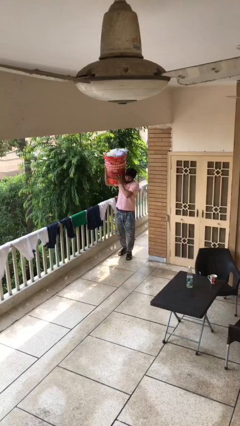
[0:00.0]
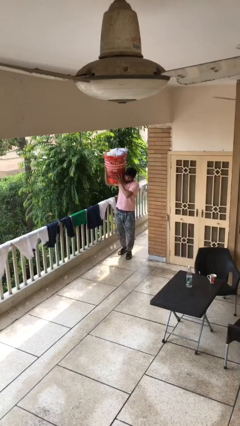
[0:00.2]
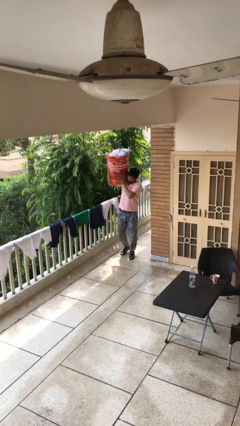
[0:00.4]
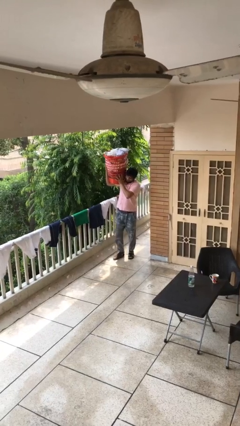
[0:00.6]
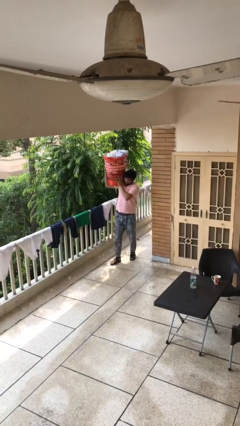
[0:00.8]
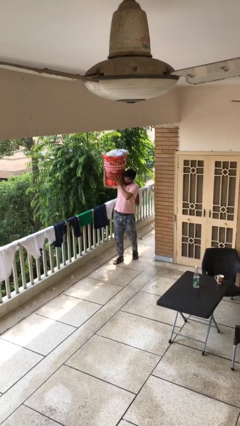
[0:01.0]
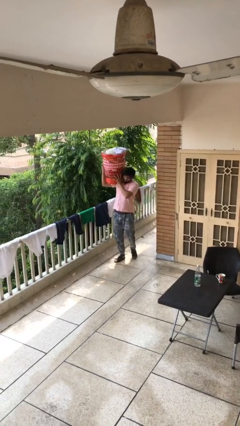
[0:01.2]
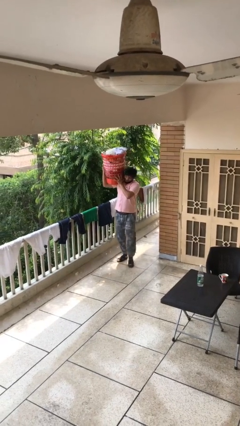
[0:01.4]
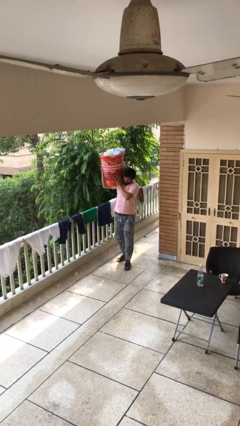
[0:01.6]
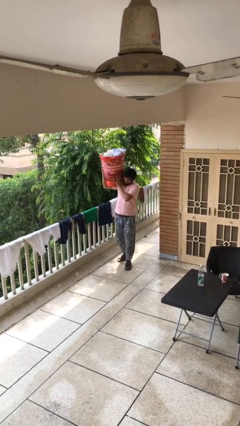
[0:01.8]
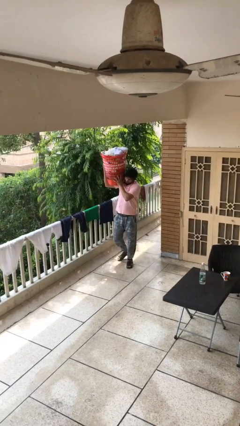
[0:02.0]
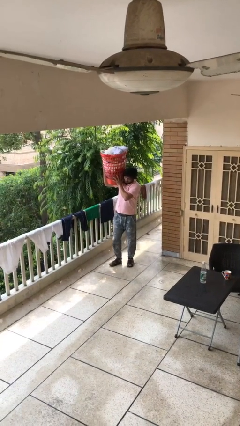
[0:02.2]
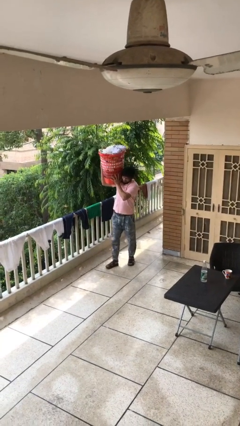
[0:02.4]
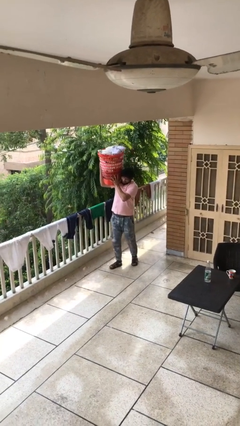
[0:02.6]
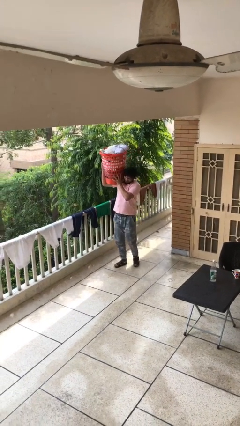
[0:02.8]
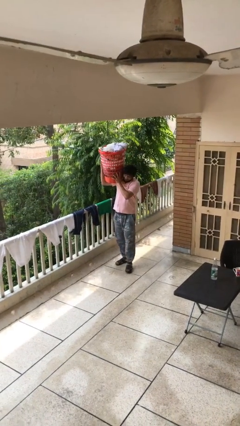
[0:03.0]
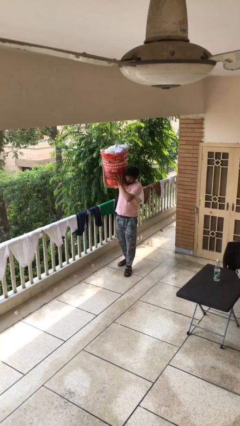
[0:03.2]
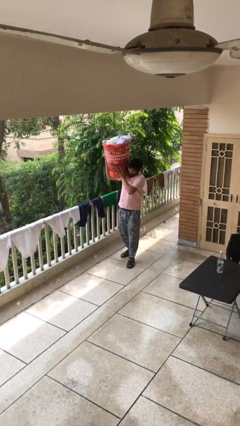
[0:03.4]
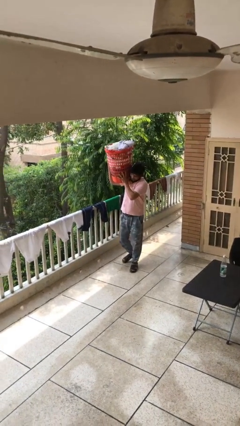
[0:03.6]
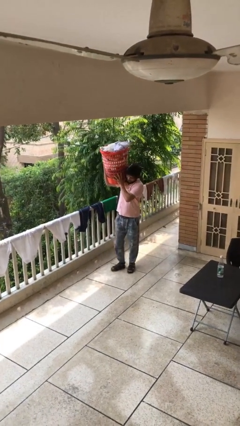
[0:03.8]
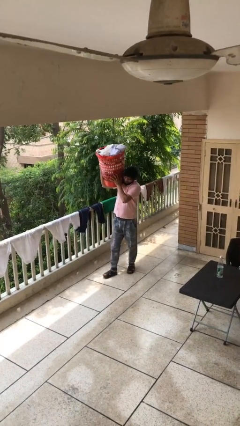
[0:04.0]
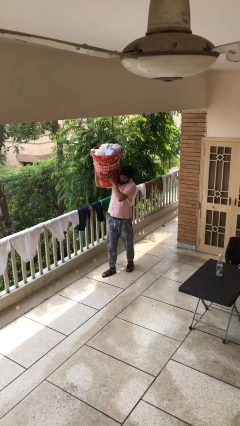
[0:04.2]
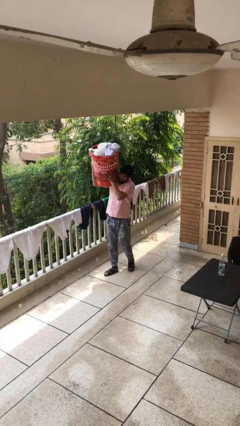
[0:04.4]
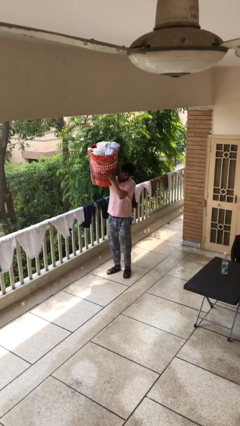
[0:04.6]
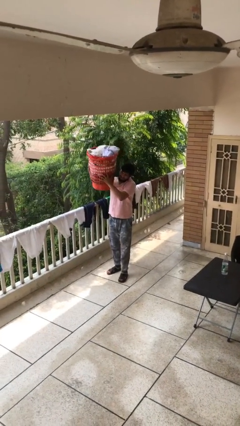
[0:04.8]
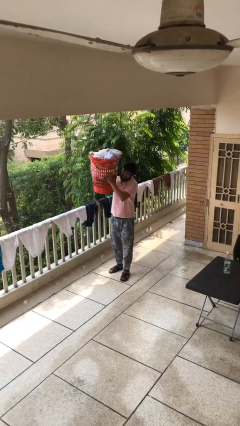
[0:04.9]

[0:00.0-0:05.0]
person carries heavy object

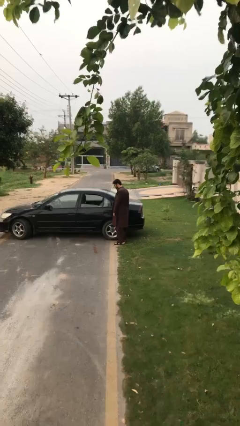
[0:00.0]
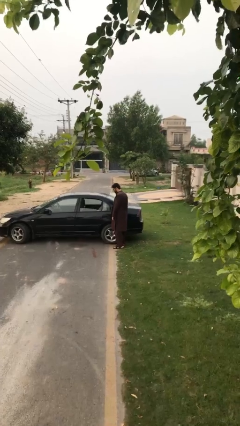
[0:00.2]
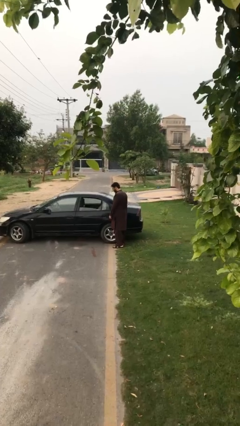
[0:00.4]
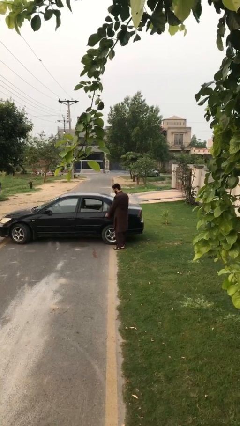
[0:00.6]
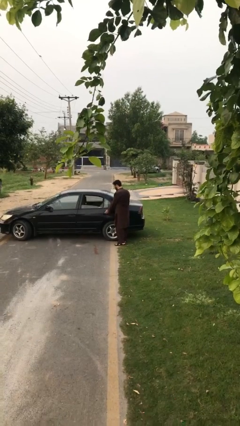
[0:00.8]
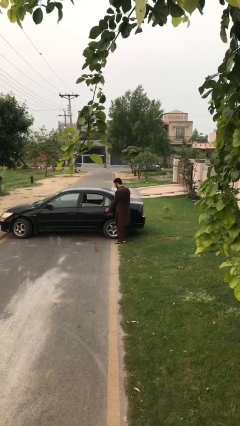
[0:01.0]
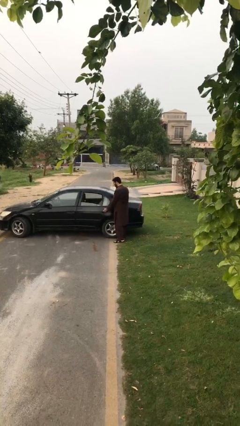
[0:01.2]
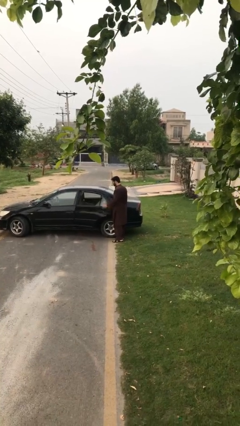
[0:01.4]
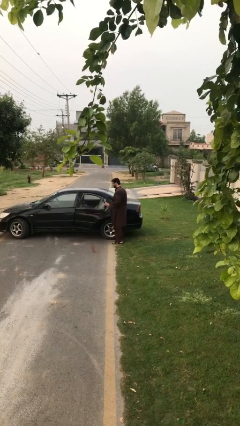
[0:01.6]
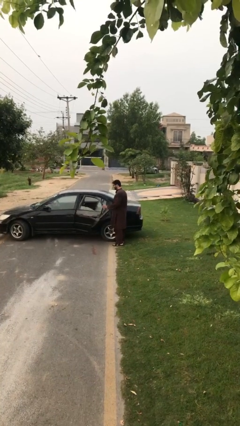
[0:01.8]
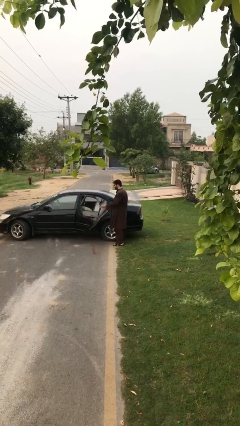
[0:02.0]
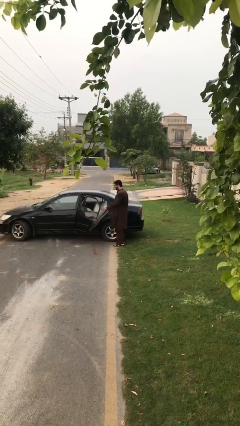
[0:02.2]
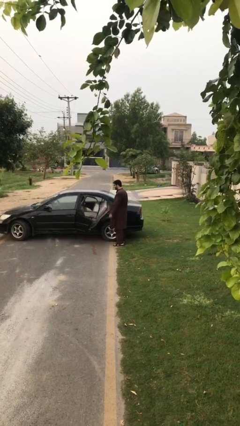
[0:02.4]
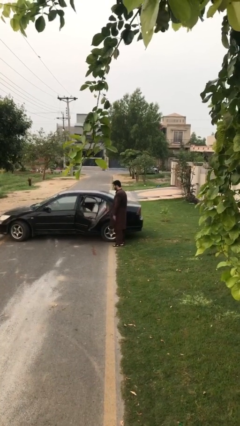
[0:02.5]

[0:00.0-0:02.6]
person opens car door

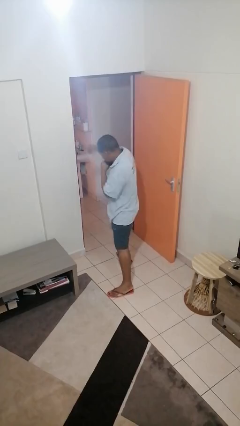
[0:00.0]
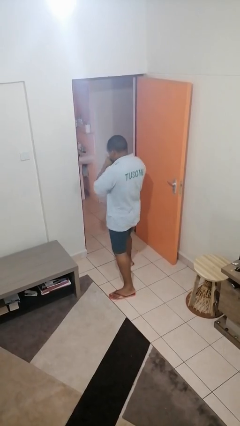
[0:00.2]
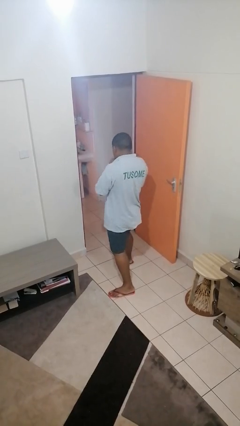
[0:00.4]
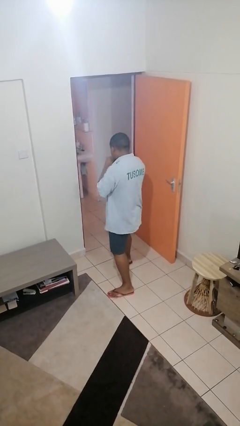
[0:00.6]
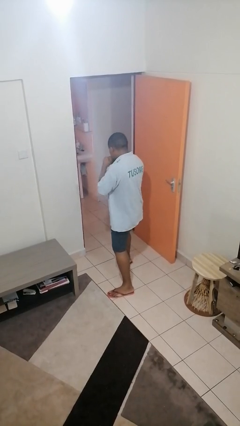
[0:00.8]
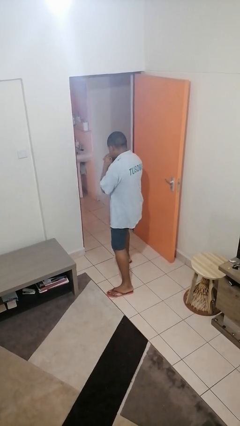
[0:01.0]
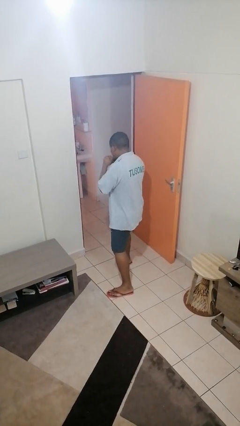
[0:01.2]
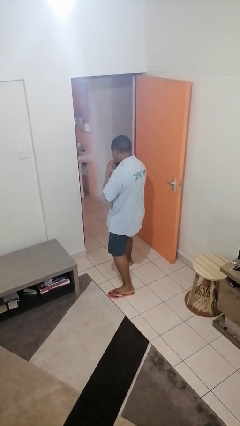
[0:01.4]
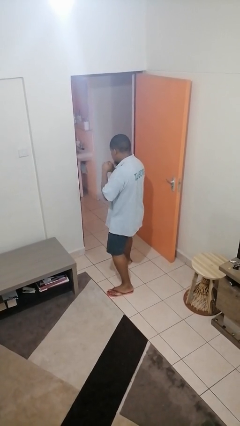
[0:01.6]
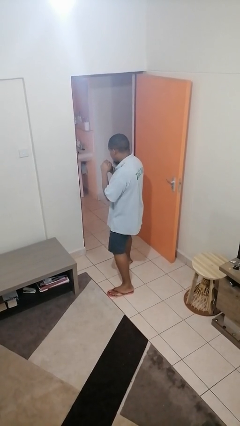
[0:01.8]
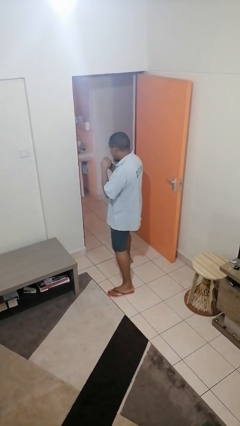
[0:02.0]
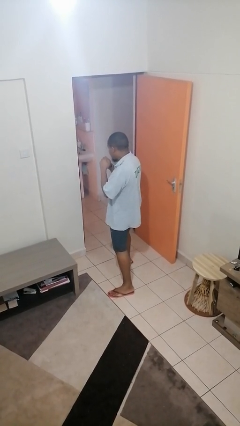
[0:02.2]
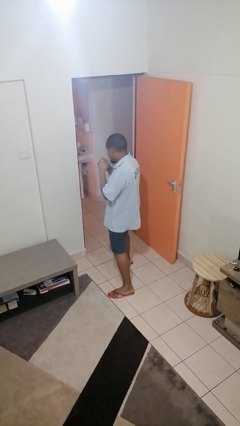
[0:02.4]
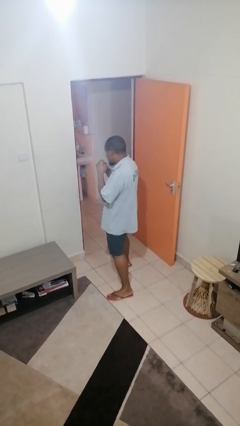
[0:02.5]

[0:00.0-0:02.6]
person punches

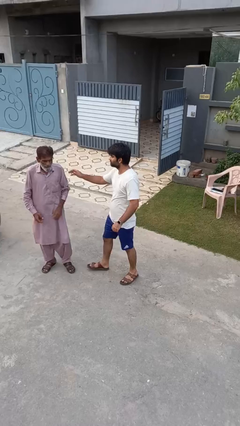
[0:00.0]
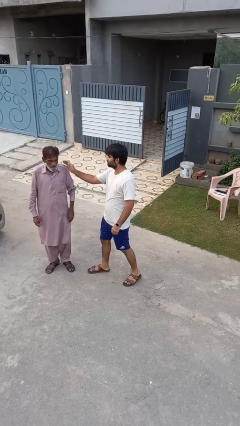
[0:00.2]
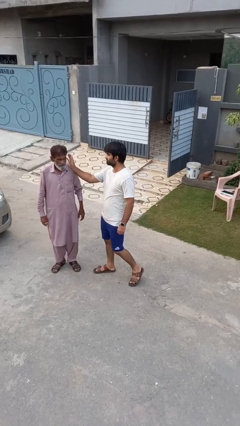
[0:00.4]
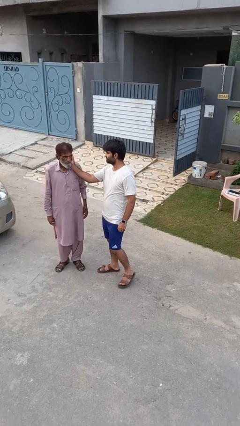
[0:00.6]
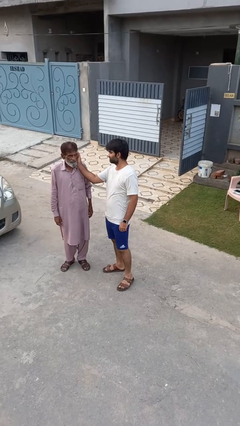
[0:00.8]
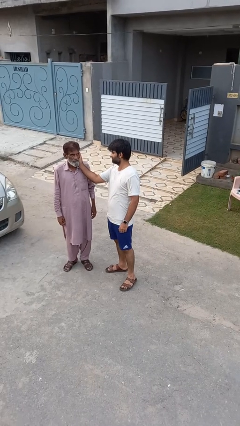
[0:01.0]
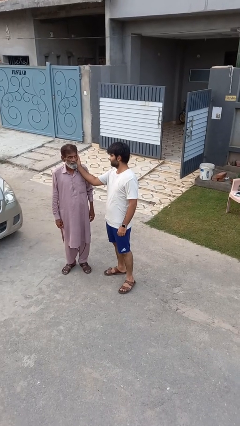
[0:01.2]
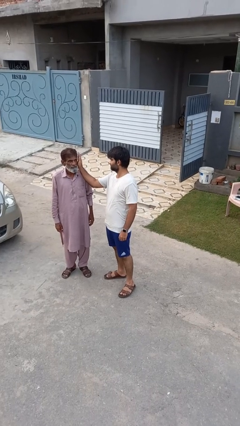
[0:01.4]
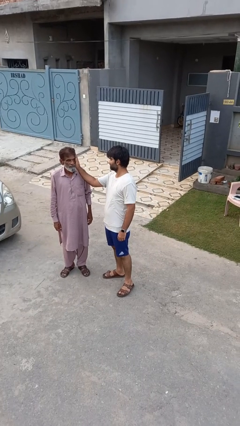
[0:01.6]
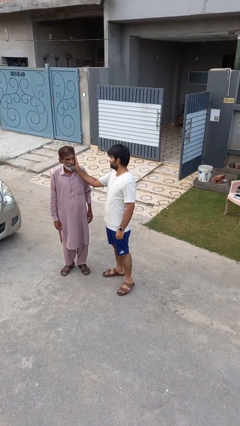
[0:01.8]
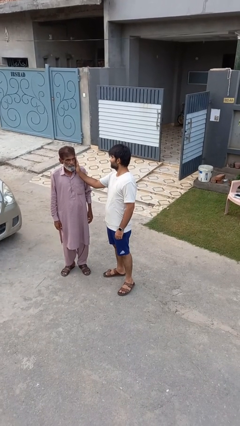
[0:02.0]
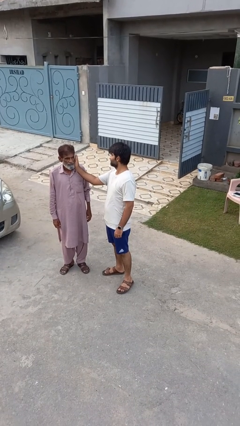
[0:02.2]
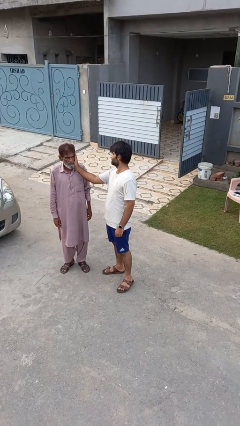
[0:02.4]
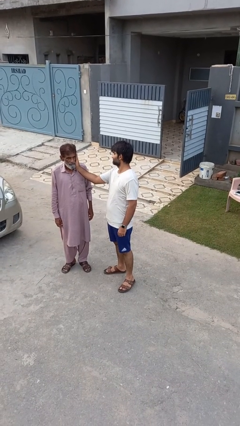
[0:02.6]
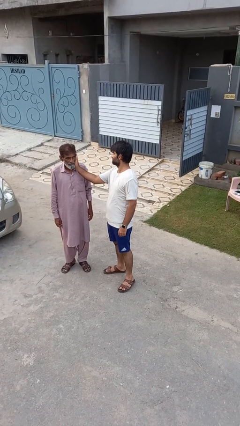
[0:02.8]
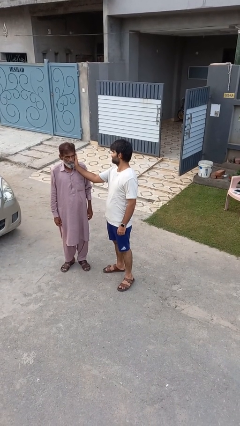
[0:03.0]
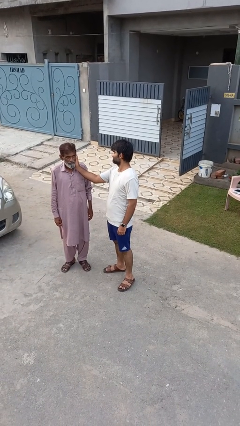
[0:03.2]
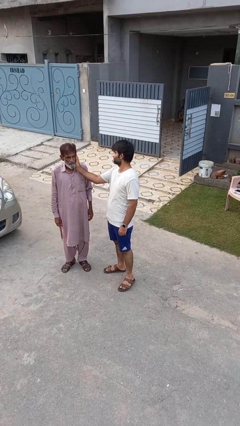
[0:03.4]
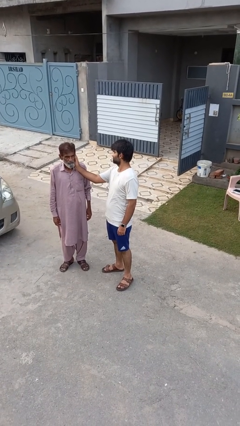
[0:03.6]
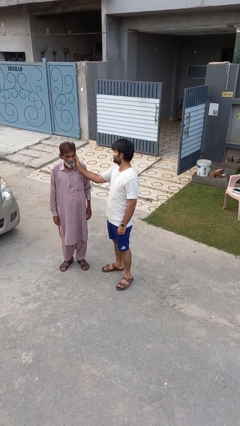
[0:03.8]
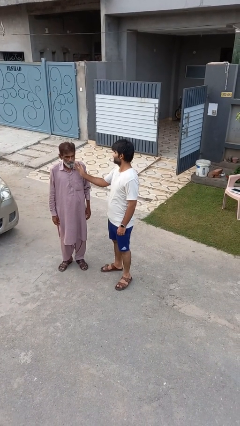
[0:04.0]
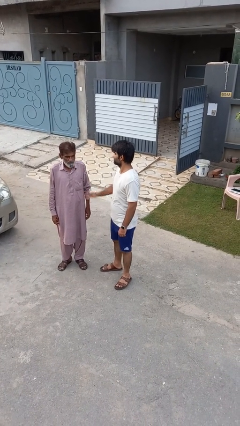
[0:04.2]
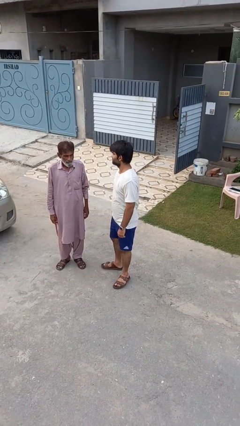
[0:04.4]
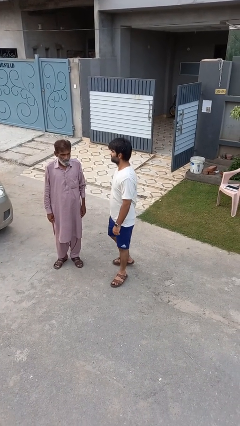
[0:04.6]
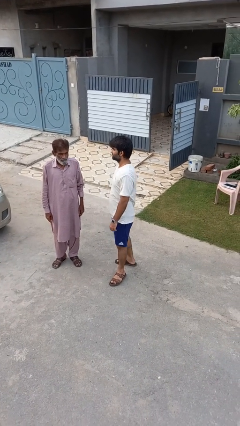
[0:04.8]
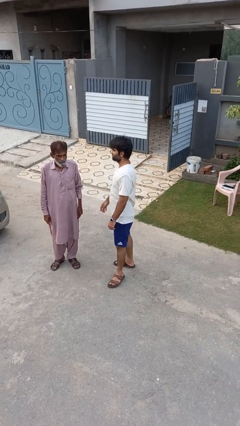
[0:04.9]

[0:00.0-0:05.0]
person touches face of person

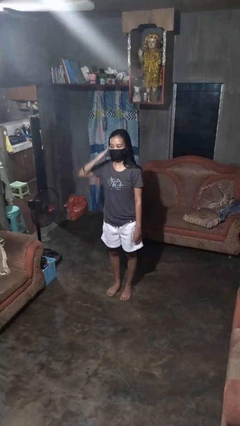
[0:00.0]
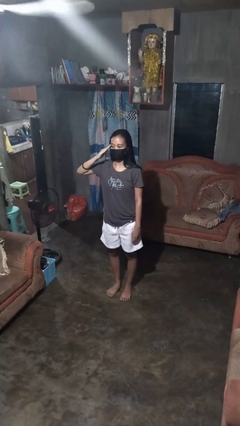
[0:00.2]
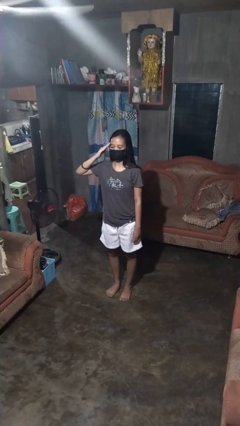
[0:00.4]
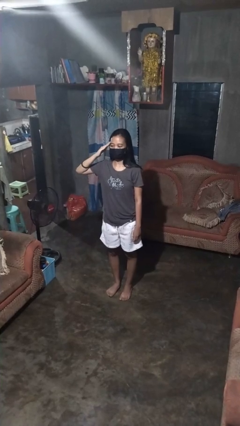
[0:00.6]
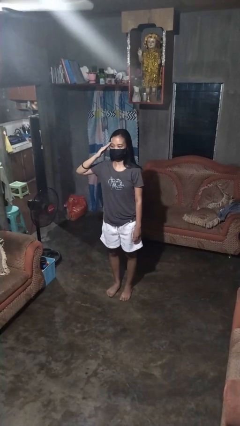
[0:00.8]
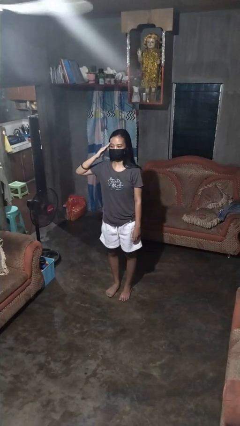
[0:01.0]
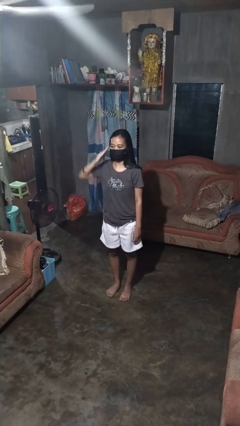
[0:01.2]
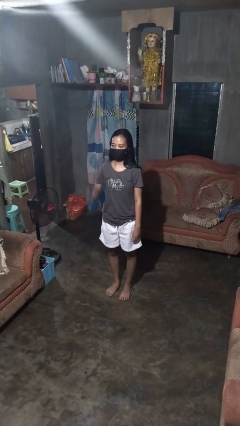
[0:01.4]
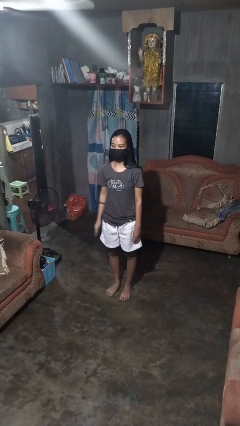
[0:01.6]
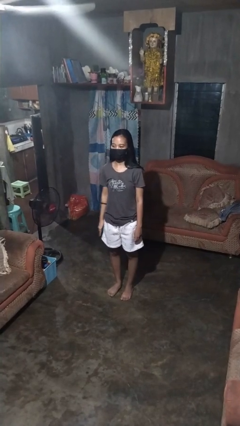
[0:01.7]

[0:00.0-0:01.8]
person salutes

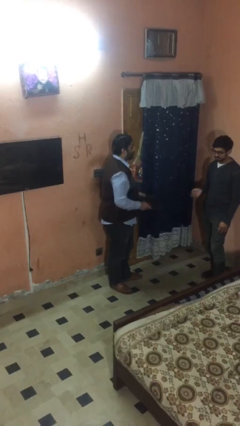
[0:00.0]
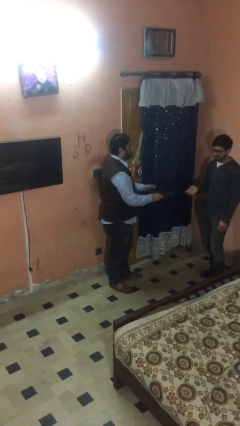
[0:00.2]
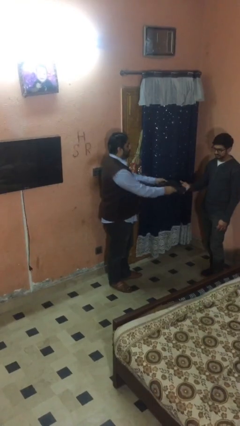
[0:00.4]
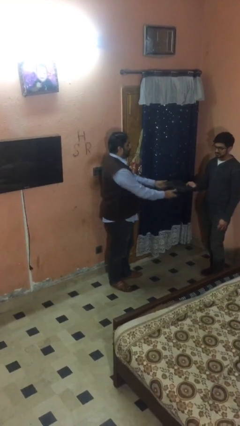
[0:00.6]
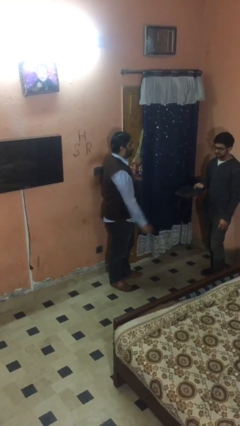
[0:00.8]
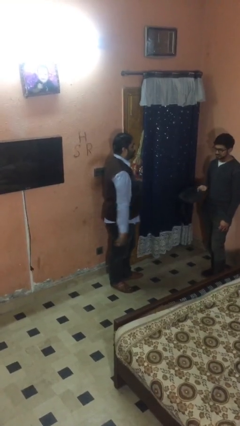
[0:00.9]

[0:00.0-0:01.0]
person transfers object to person
